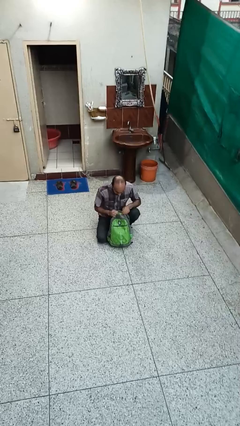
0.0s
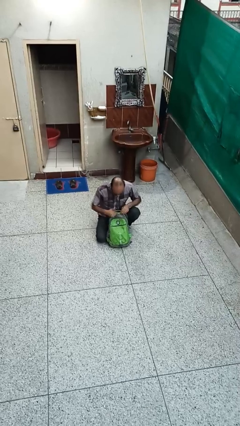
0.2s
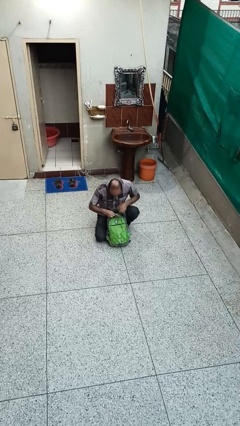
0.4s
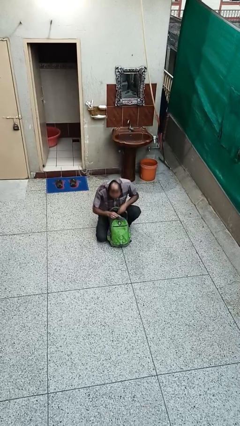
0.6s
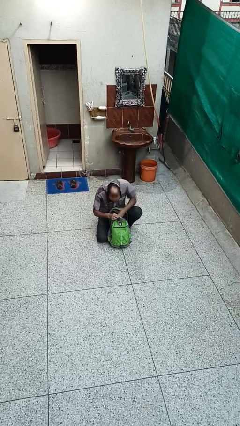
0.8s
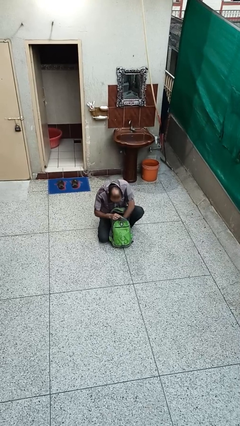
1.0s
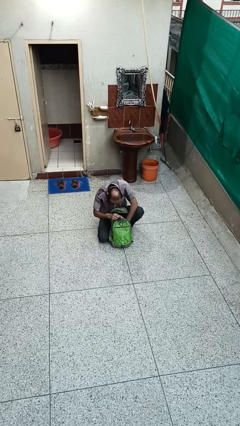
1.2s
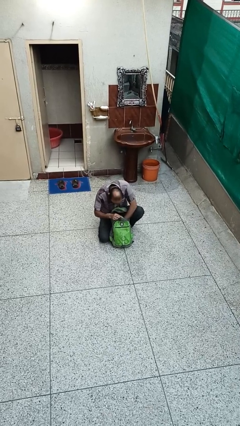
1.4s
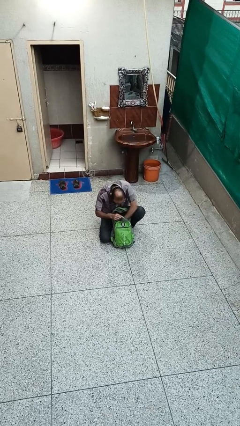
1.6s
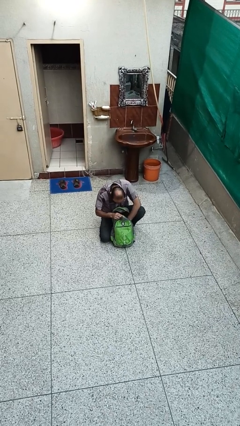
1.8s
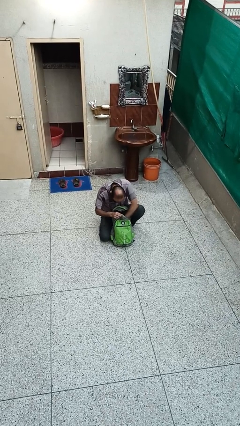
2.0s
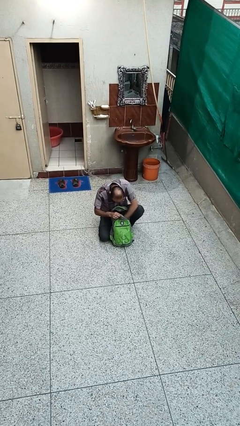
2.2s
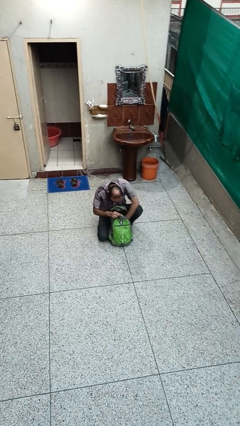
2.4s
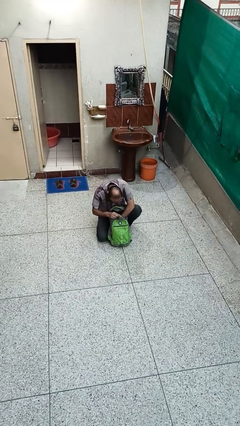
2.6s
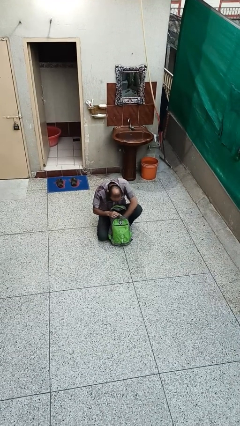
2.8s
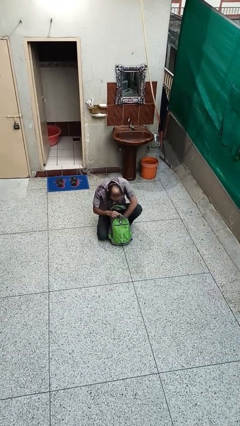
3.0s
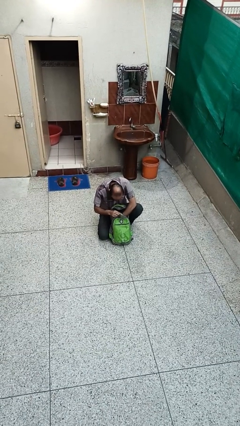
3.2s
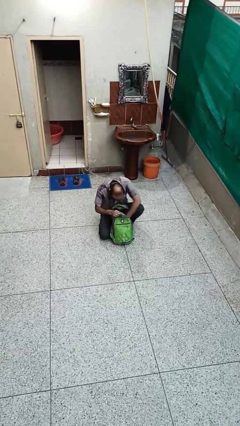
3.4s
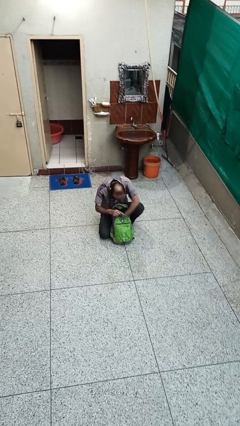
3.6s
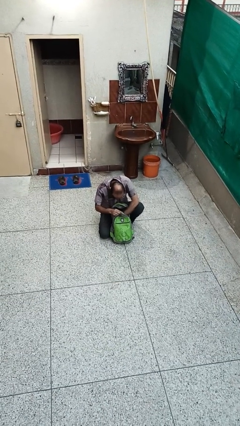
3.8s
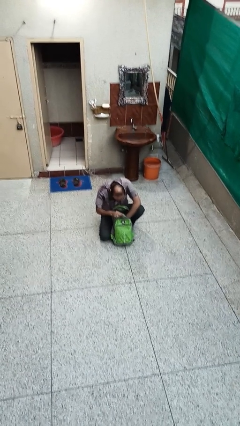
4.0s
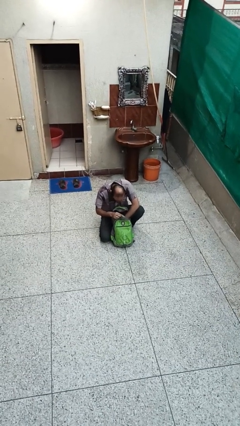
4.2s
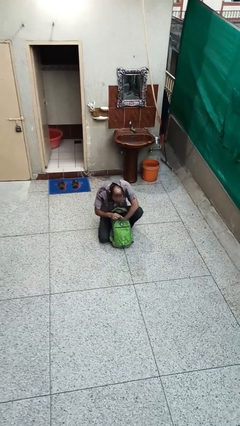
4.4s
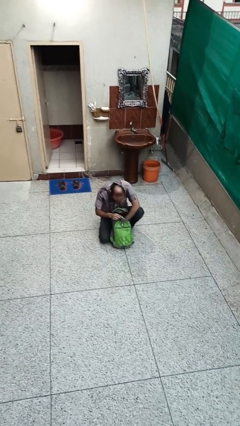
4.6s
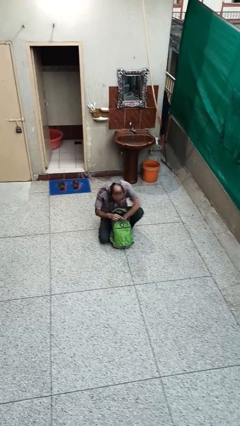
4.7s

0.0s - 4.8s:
person searches in backpack

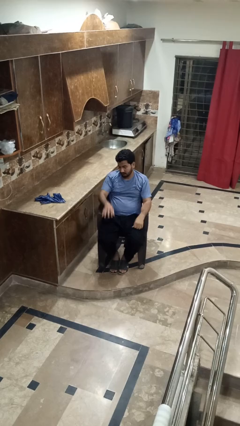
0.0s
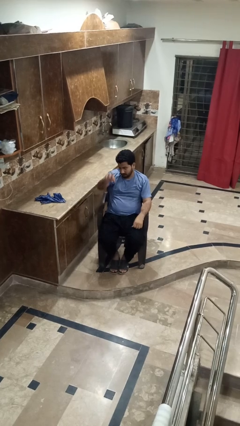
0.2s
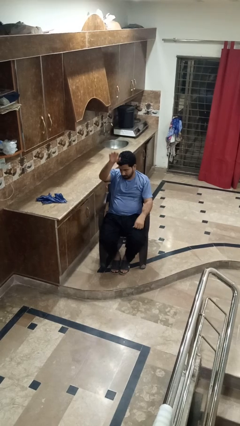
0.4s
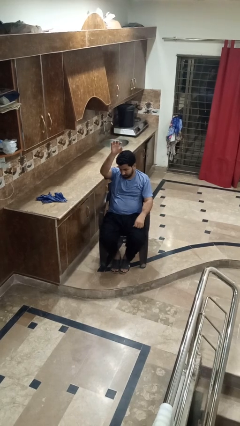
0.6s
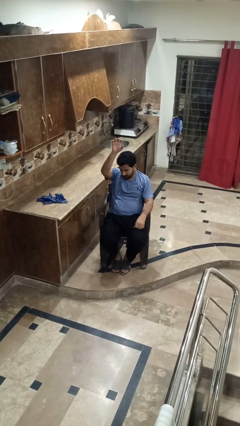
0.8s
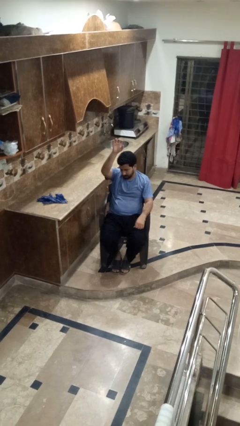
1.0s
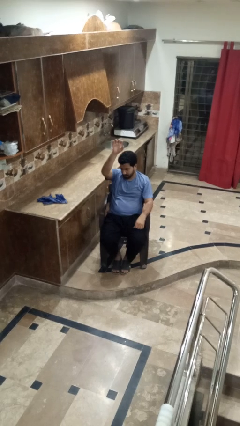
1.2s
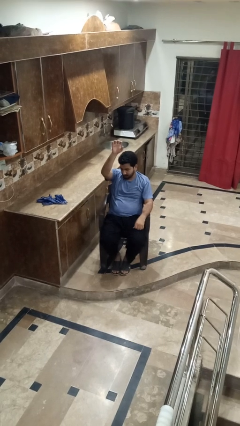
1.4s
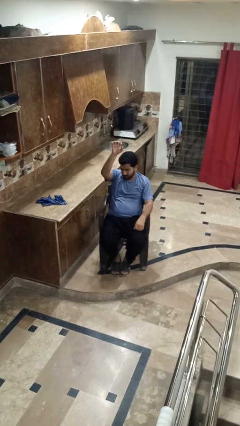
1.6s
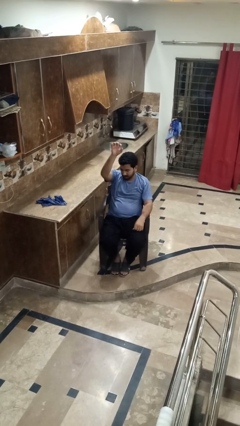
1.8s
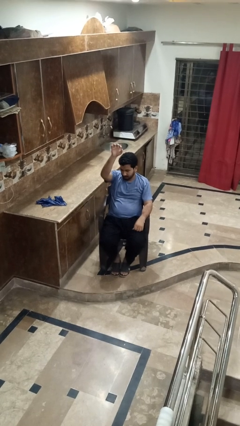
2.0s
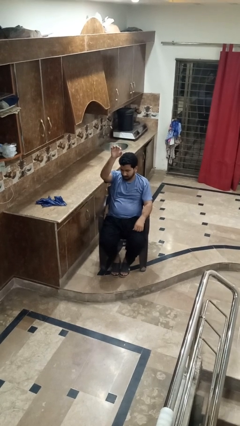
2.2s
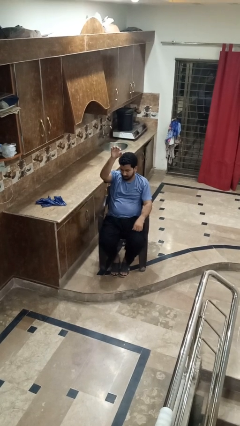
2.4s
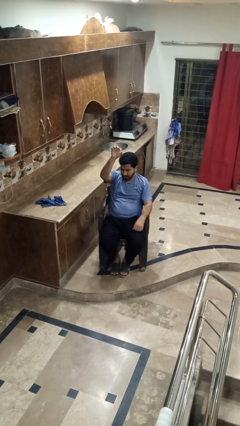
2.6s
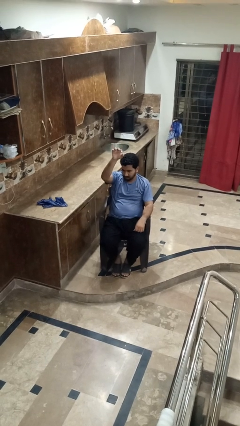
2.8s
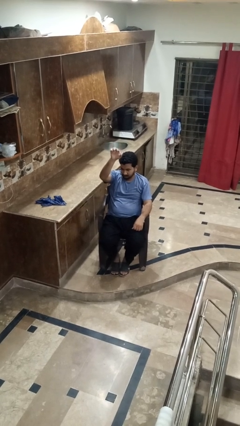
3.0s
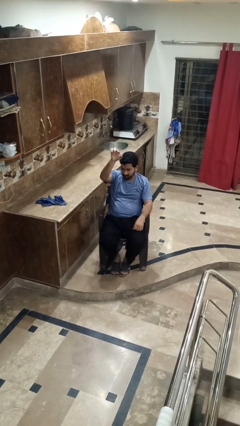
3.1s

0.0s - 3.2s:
person gestures raise hand

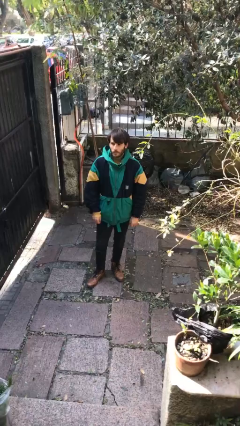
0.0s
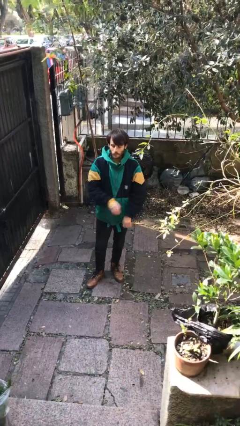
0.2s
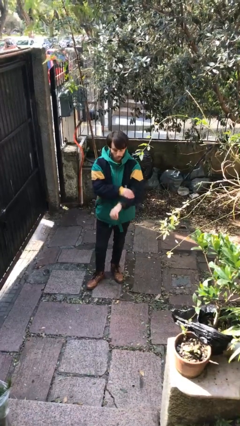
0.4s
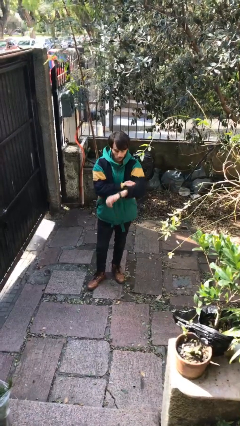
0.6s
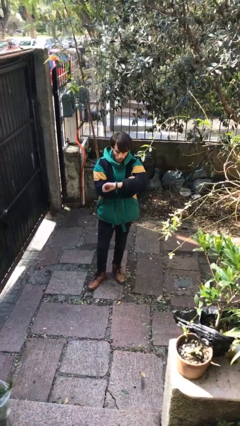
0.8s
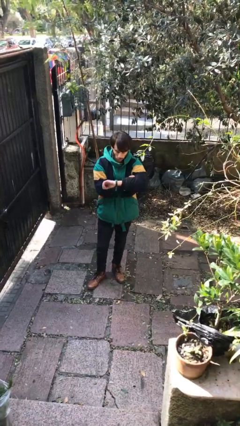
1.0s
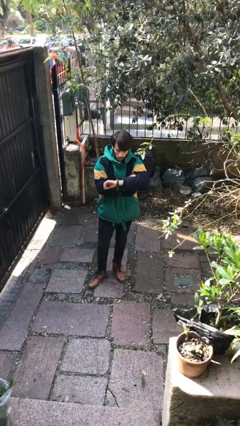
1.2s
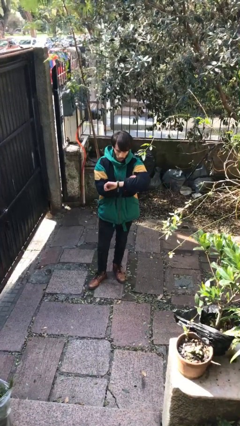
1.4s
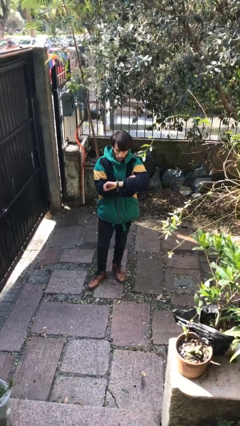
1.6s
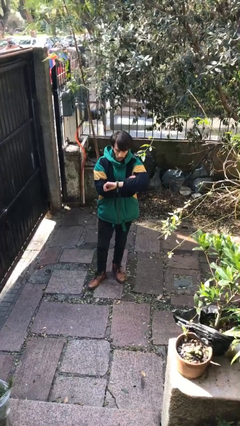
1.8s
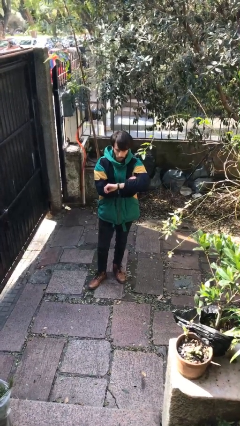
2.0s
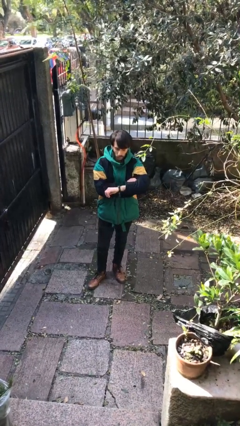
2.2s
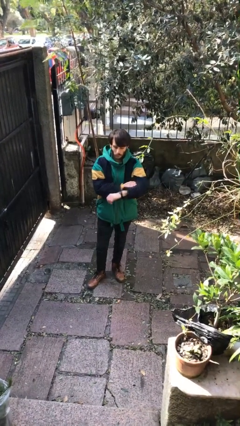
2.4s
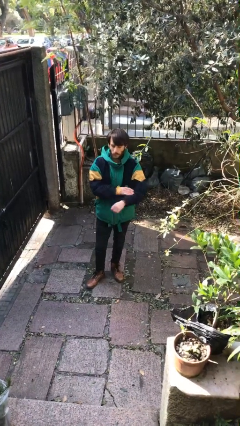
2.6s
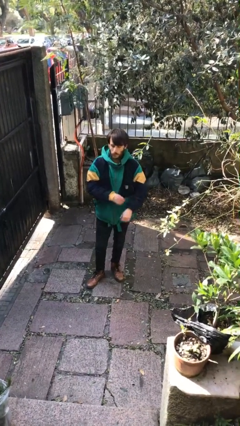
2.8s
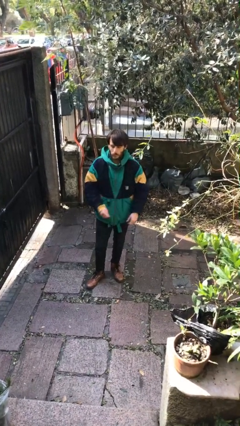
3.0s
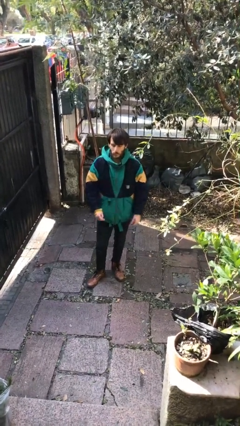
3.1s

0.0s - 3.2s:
person looks at wristwatch

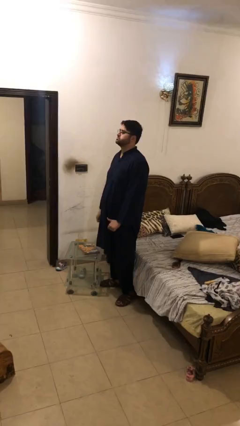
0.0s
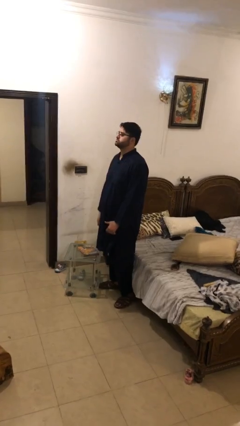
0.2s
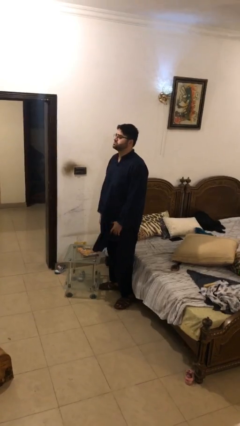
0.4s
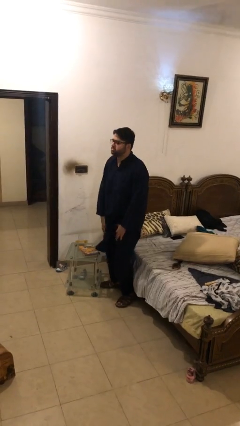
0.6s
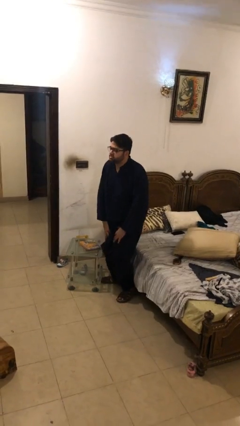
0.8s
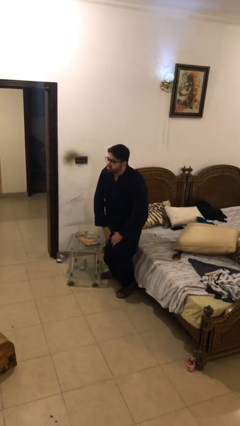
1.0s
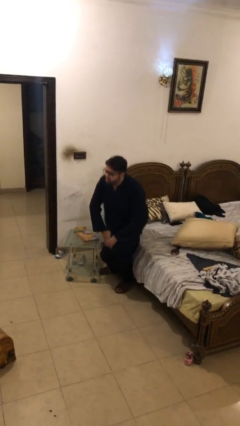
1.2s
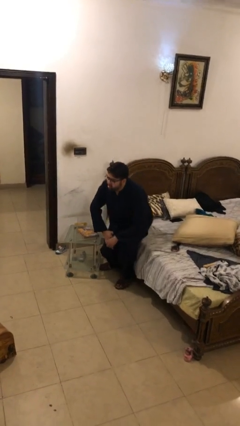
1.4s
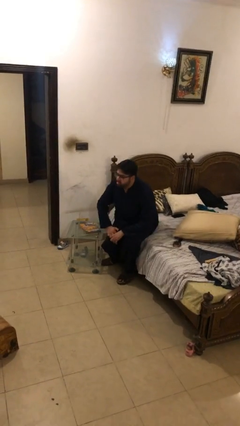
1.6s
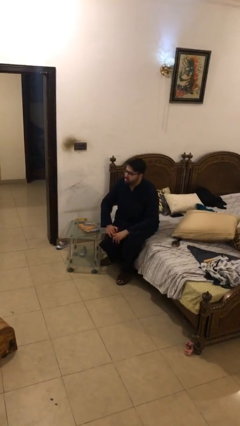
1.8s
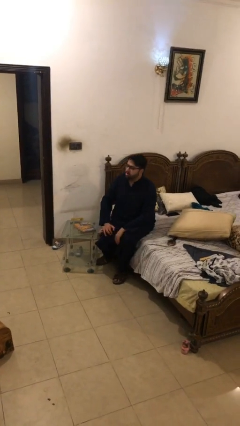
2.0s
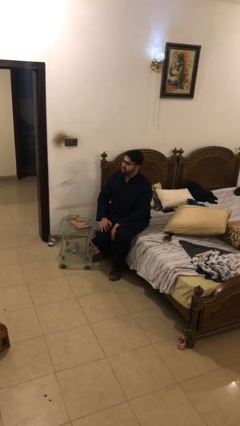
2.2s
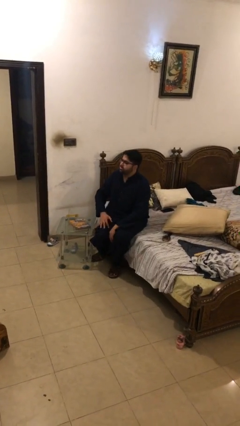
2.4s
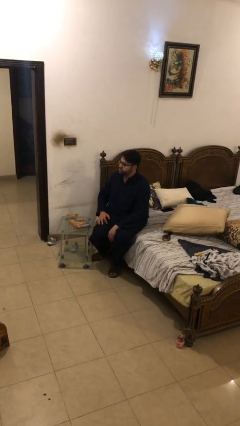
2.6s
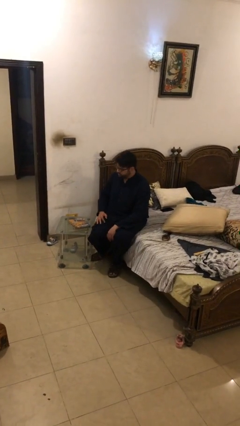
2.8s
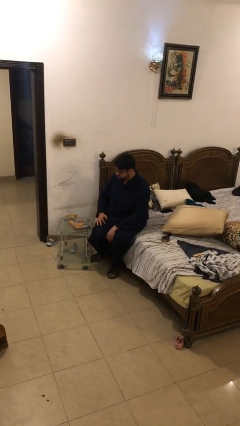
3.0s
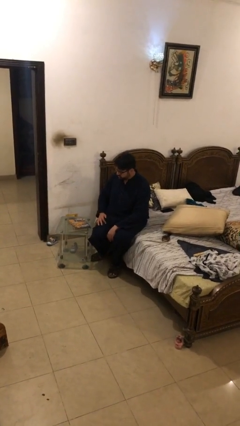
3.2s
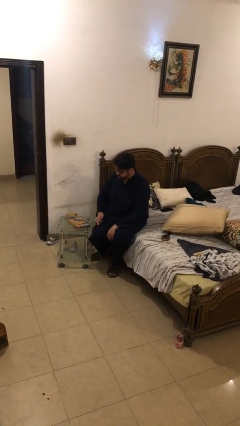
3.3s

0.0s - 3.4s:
person sits down

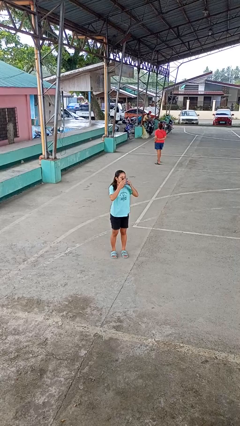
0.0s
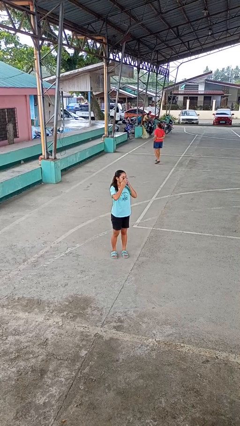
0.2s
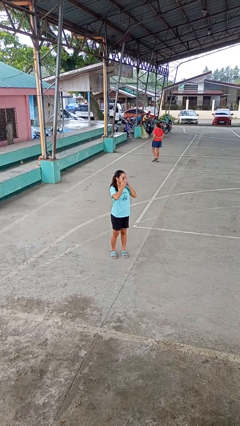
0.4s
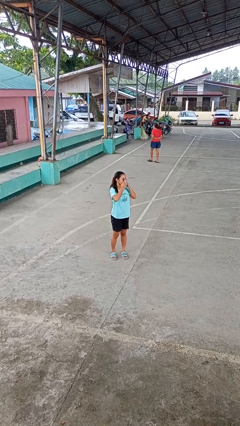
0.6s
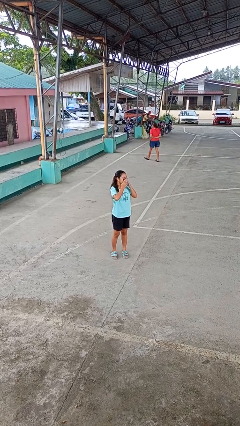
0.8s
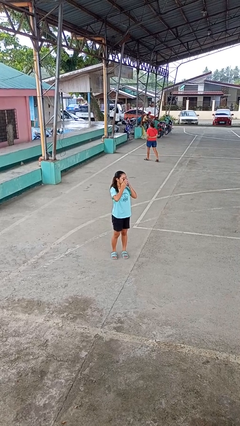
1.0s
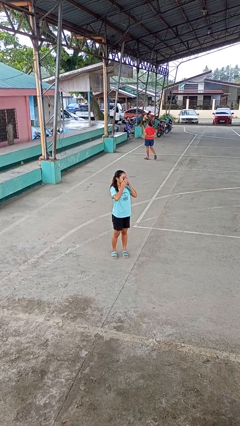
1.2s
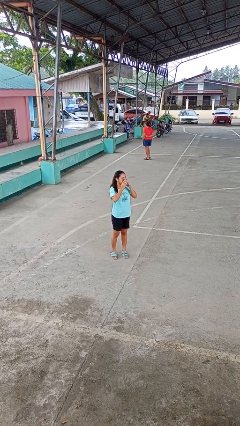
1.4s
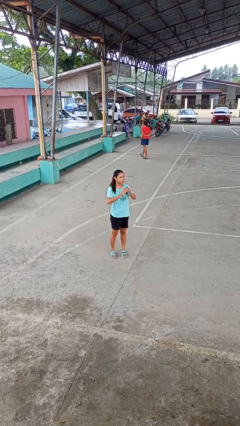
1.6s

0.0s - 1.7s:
person blows nose

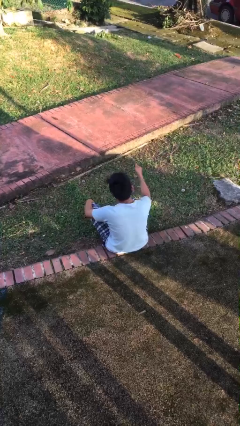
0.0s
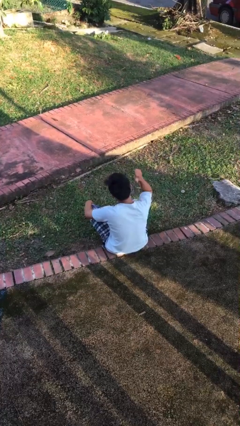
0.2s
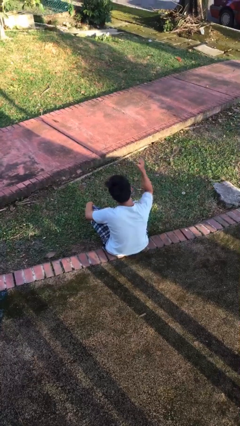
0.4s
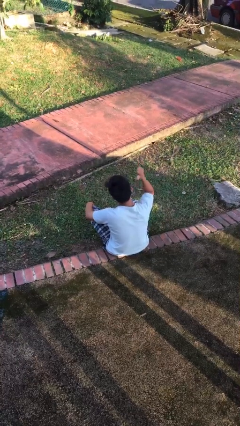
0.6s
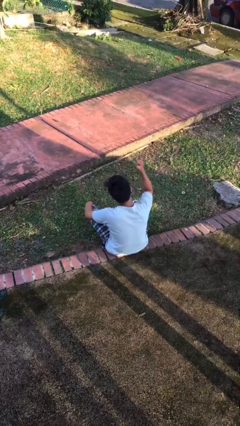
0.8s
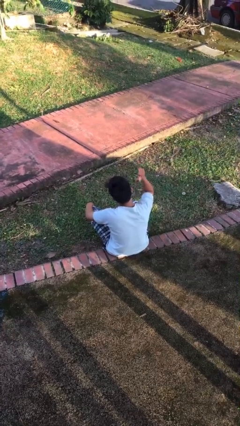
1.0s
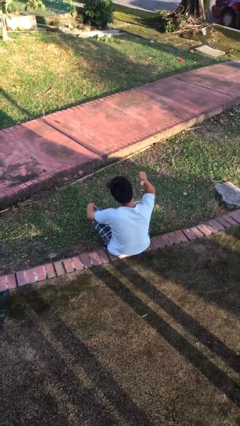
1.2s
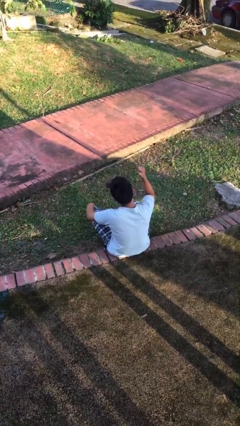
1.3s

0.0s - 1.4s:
person gestures behind me
